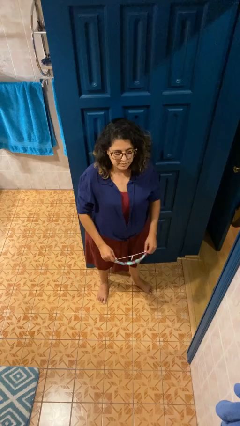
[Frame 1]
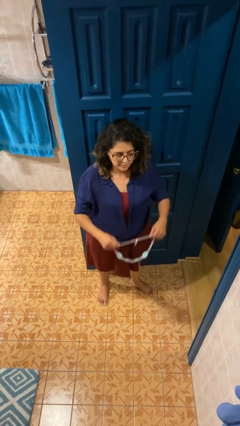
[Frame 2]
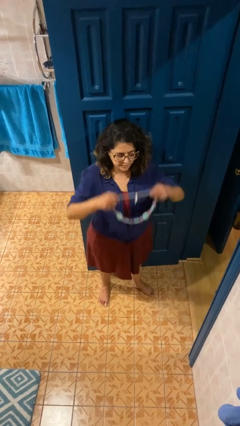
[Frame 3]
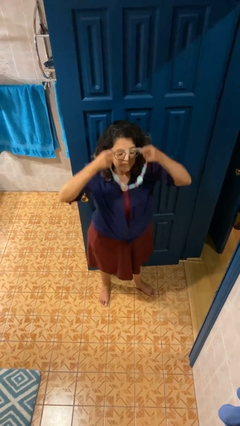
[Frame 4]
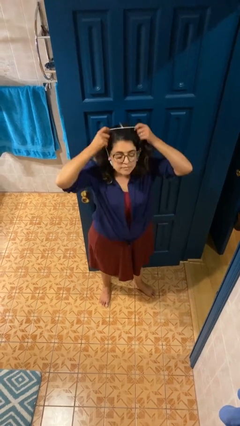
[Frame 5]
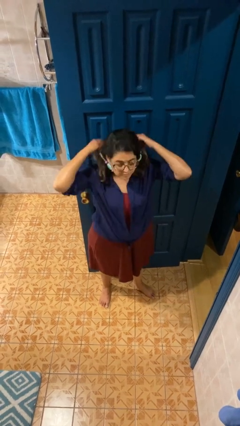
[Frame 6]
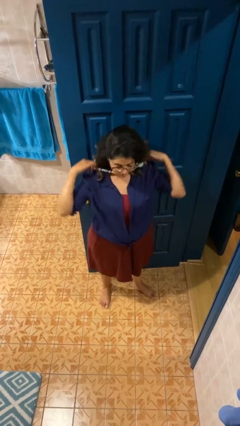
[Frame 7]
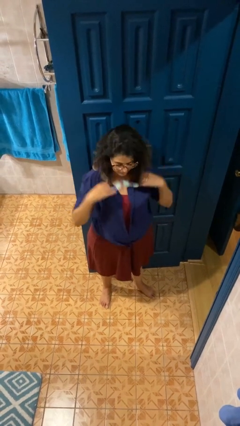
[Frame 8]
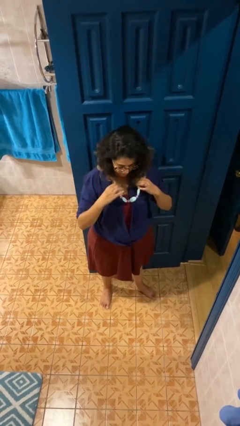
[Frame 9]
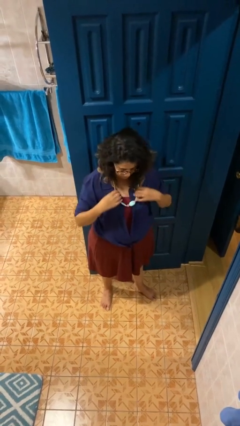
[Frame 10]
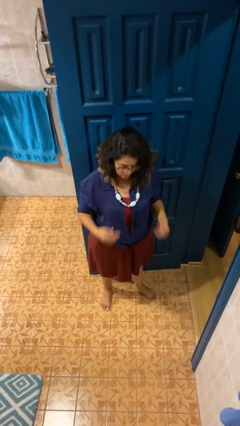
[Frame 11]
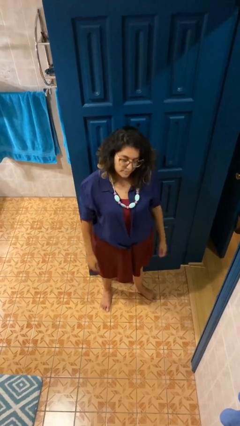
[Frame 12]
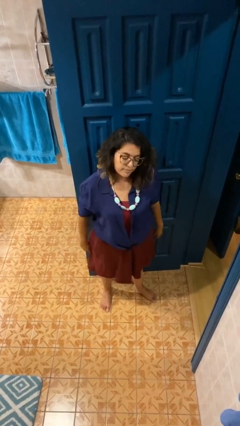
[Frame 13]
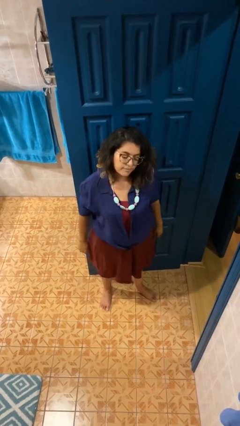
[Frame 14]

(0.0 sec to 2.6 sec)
person puts on necklace

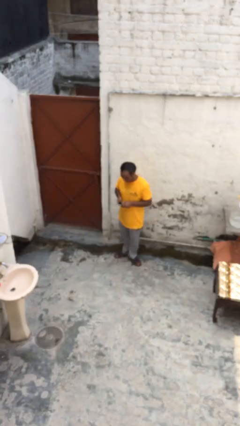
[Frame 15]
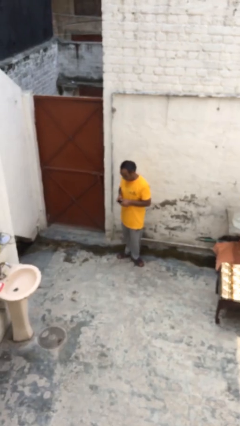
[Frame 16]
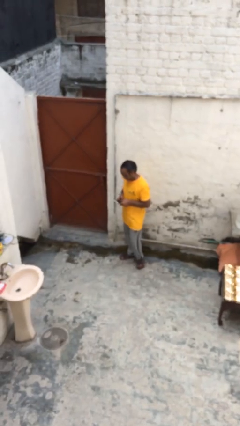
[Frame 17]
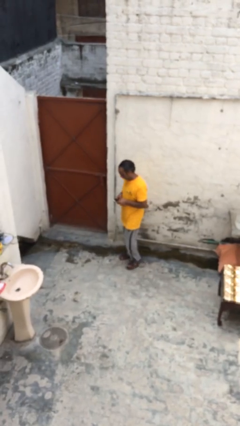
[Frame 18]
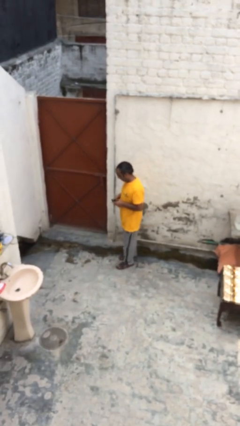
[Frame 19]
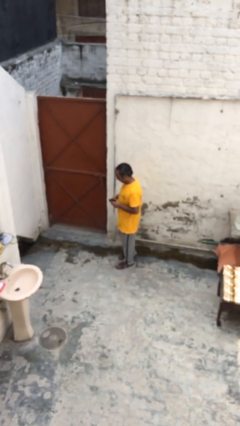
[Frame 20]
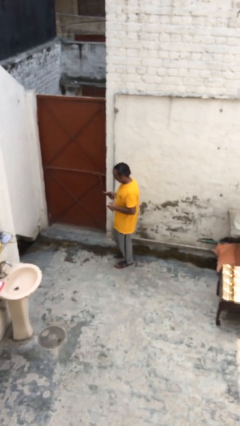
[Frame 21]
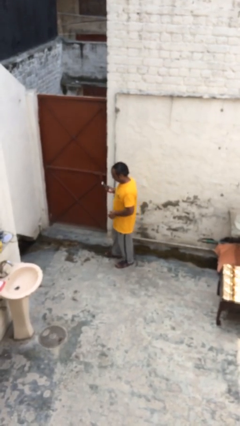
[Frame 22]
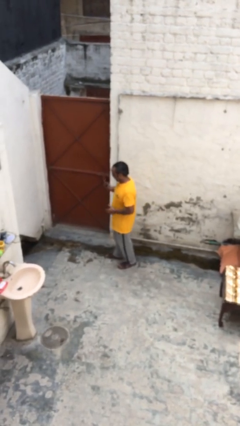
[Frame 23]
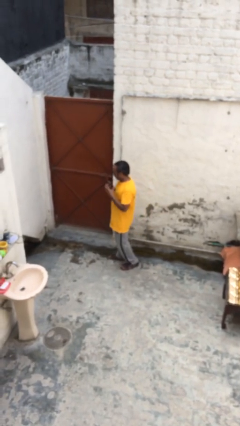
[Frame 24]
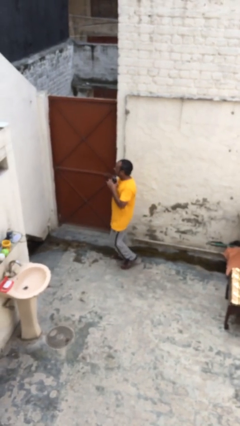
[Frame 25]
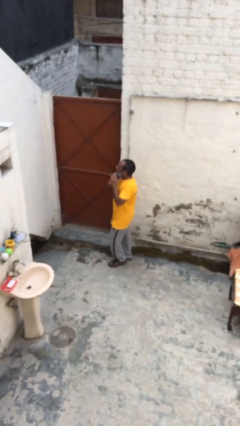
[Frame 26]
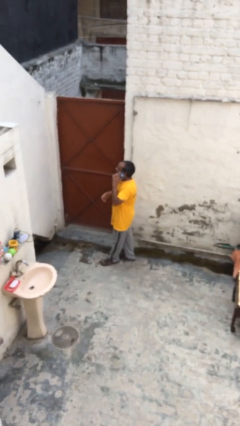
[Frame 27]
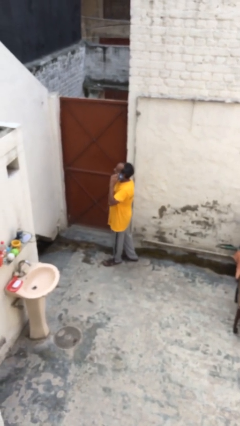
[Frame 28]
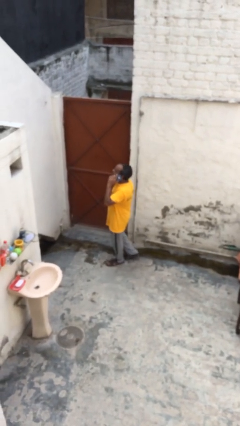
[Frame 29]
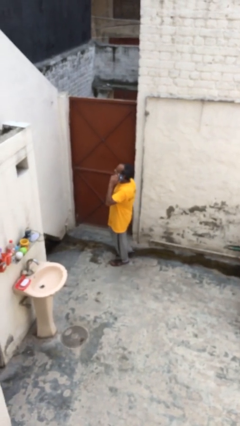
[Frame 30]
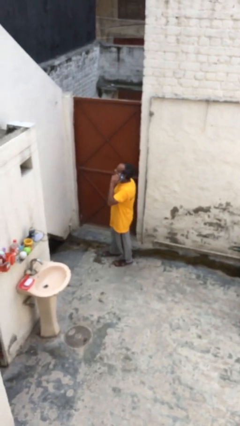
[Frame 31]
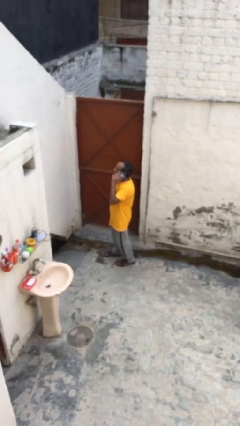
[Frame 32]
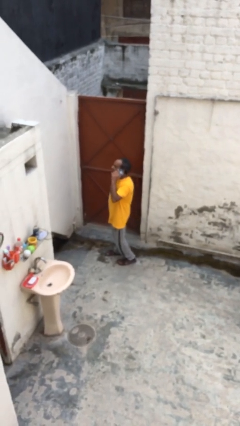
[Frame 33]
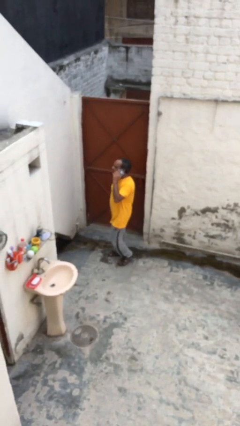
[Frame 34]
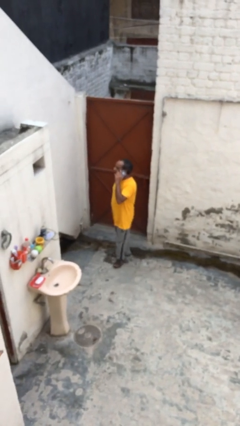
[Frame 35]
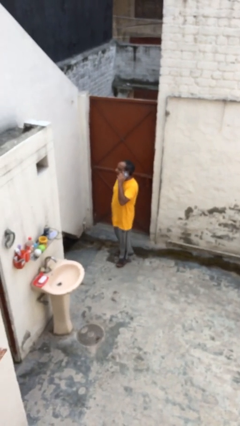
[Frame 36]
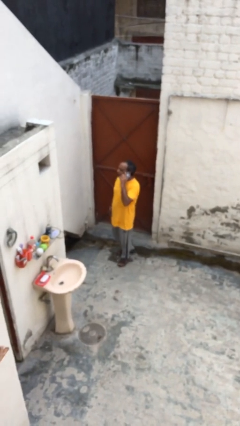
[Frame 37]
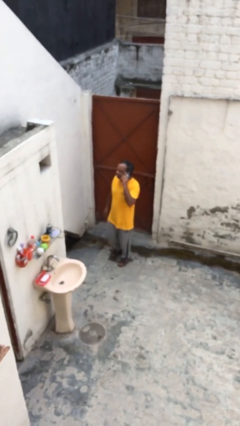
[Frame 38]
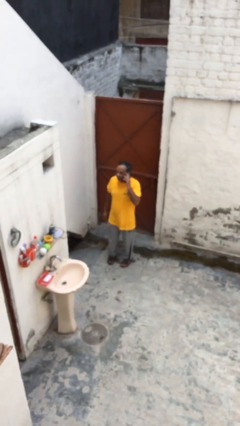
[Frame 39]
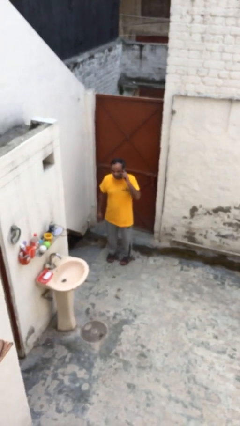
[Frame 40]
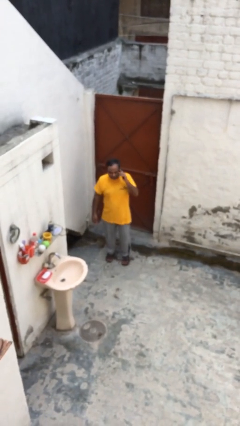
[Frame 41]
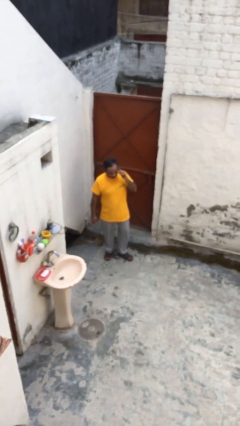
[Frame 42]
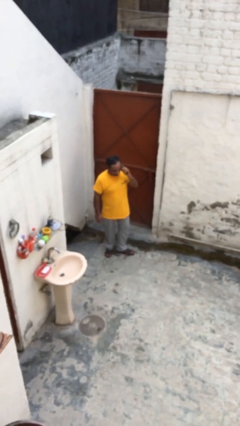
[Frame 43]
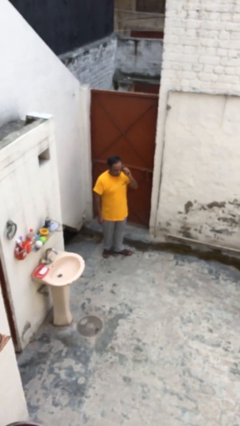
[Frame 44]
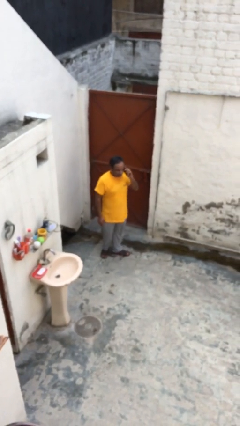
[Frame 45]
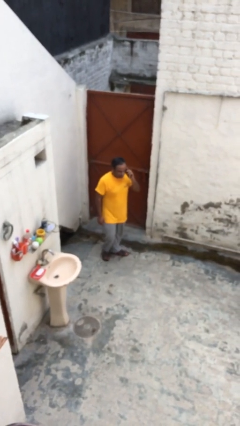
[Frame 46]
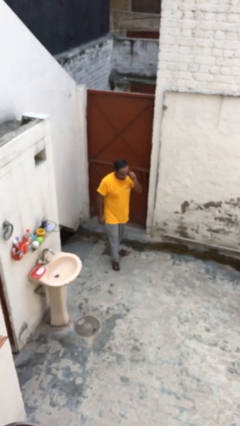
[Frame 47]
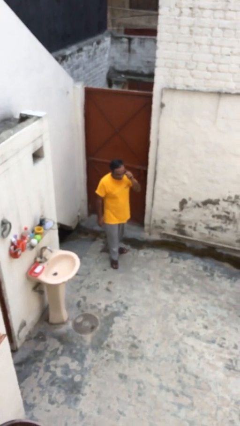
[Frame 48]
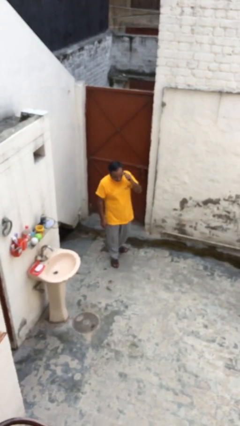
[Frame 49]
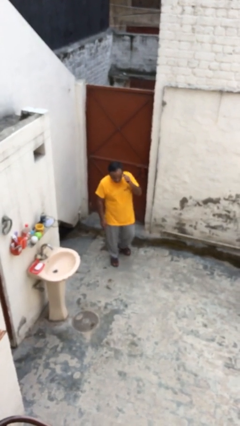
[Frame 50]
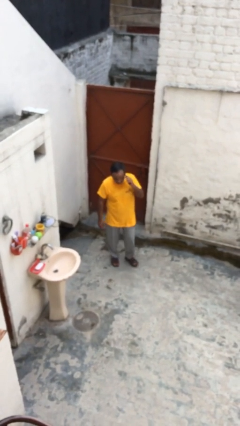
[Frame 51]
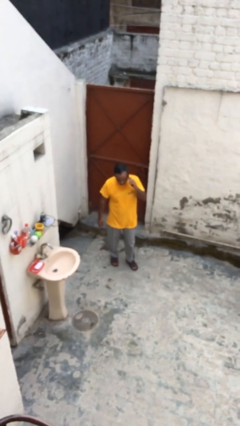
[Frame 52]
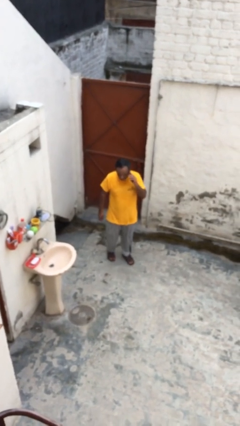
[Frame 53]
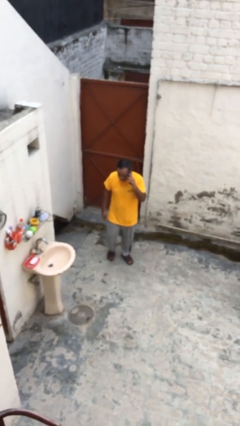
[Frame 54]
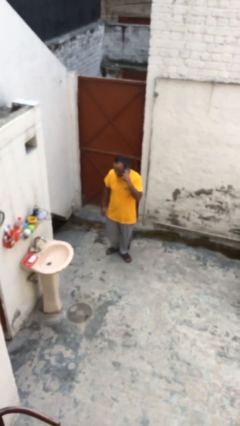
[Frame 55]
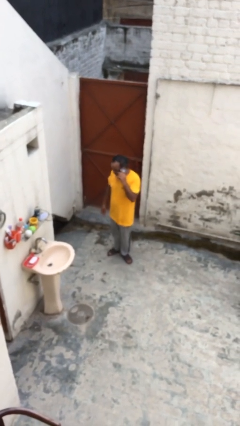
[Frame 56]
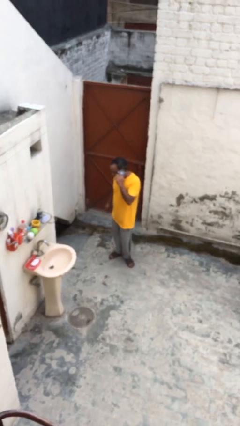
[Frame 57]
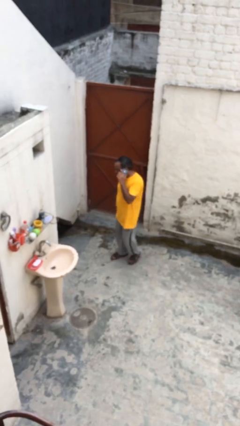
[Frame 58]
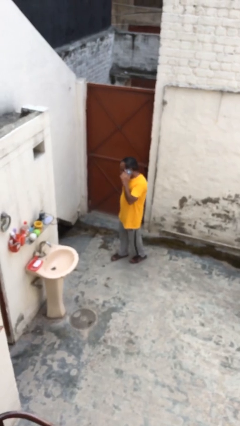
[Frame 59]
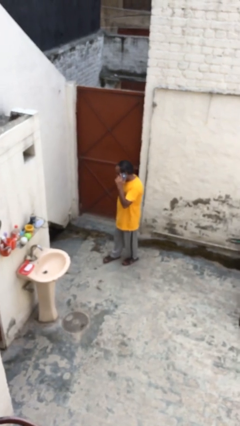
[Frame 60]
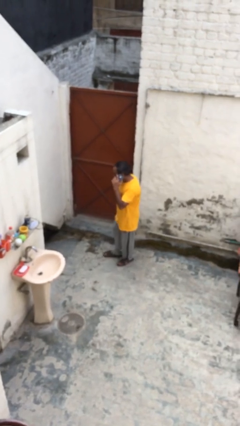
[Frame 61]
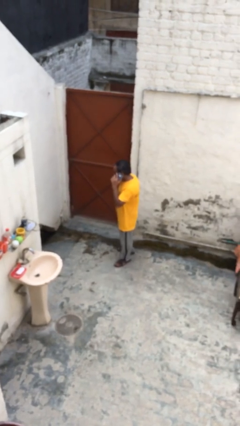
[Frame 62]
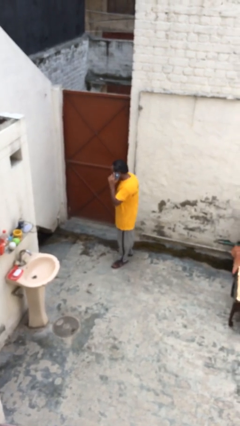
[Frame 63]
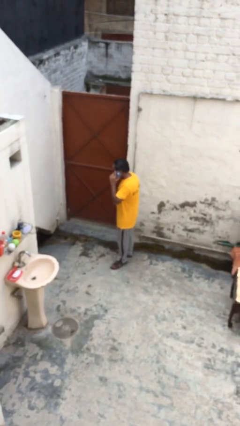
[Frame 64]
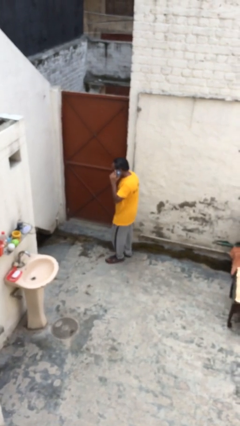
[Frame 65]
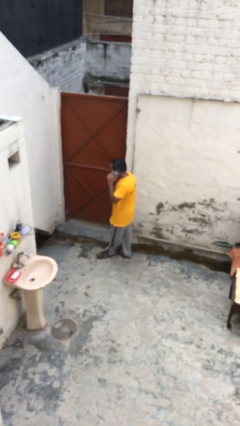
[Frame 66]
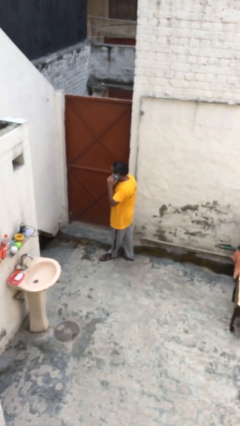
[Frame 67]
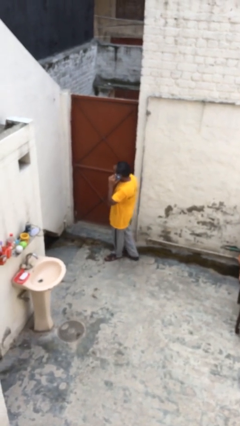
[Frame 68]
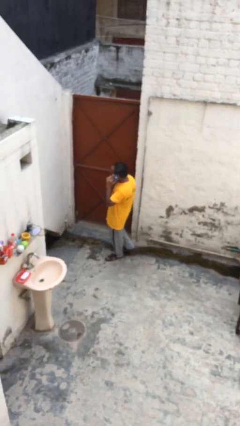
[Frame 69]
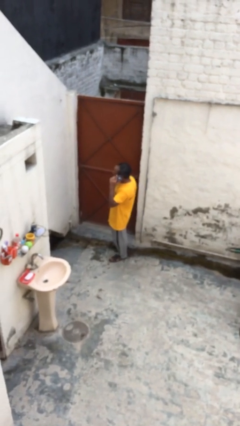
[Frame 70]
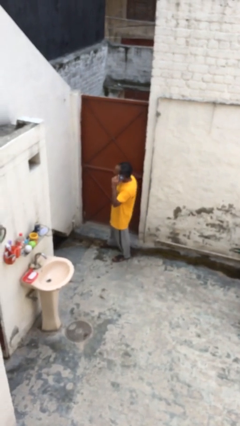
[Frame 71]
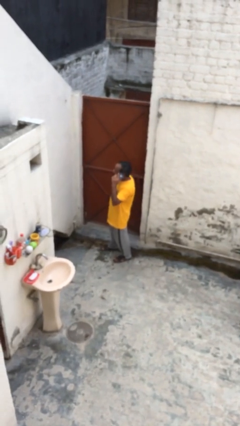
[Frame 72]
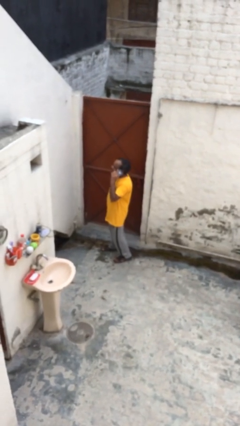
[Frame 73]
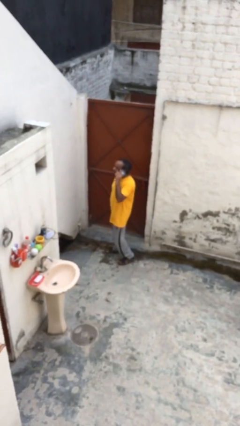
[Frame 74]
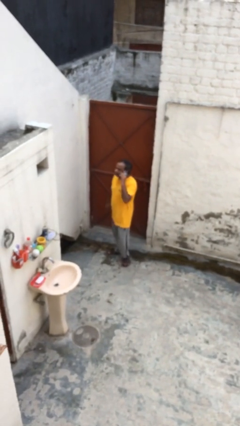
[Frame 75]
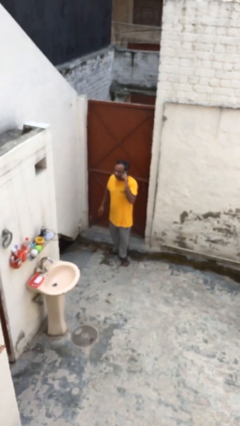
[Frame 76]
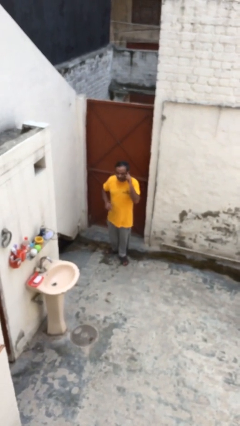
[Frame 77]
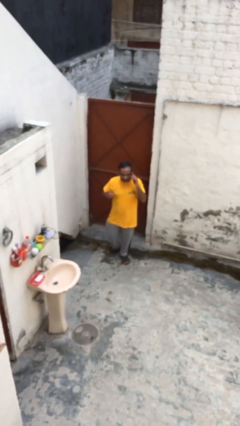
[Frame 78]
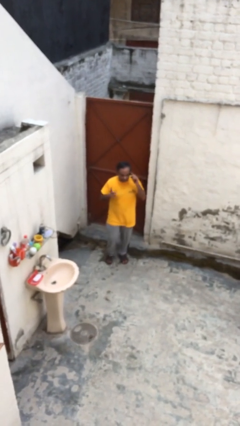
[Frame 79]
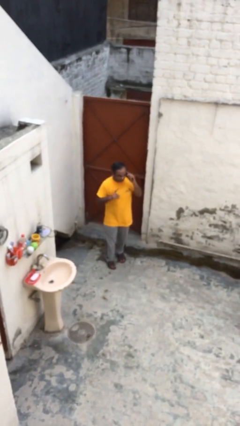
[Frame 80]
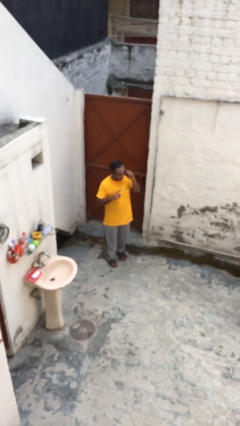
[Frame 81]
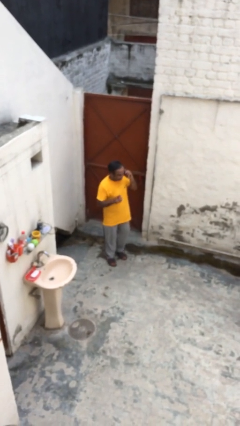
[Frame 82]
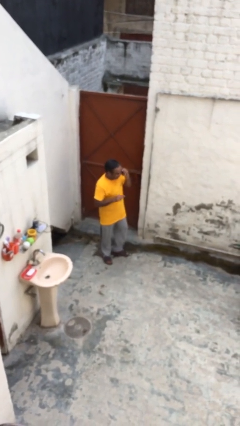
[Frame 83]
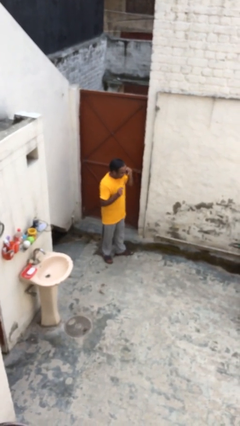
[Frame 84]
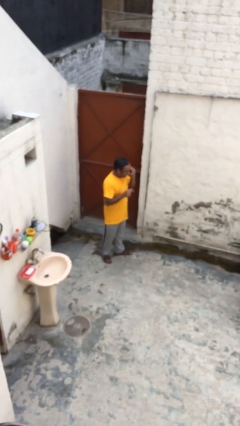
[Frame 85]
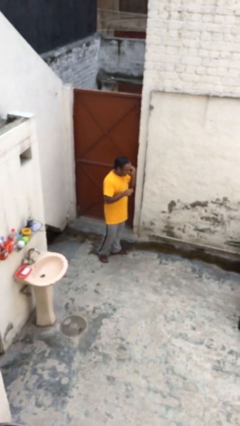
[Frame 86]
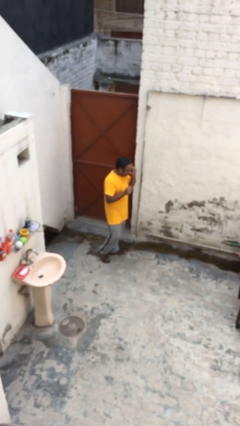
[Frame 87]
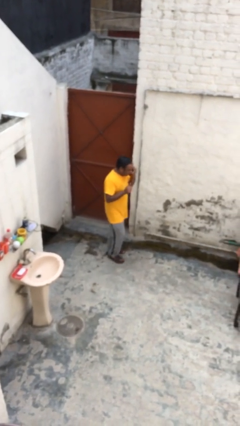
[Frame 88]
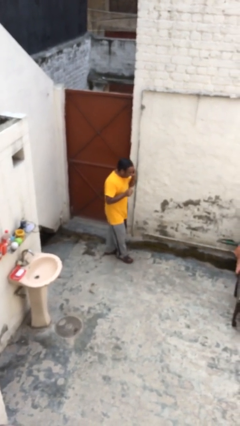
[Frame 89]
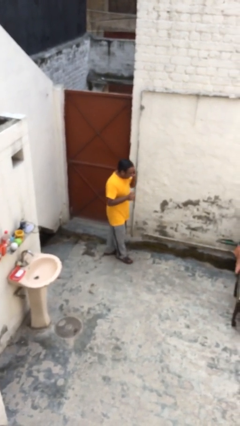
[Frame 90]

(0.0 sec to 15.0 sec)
person talks on phone

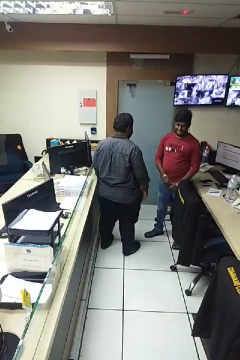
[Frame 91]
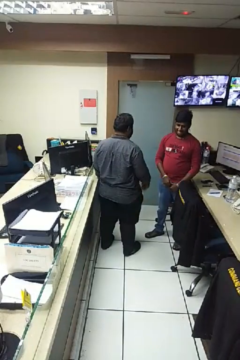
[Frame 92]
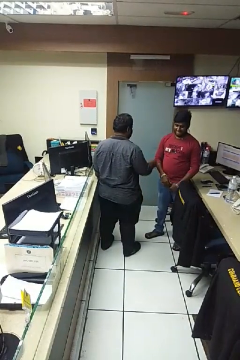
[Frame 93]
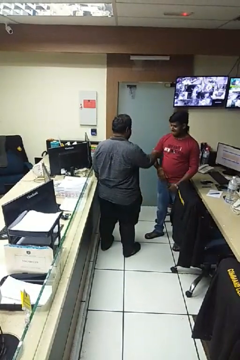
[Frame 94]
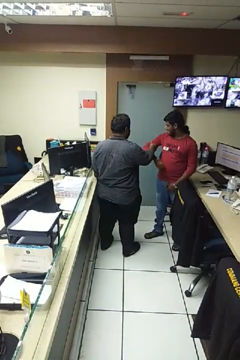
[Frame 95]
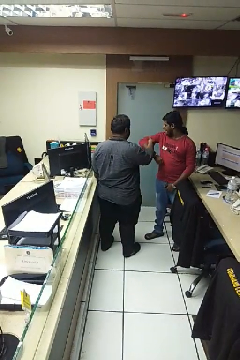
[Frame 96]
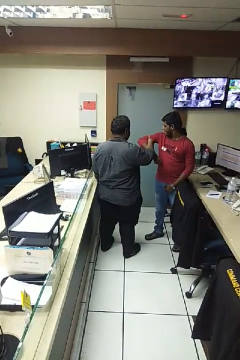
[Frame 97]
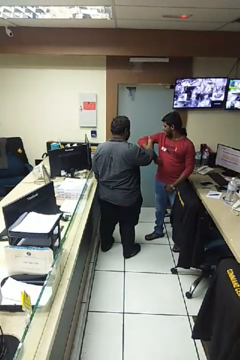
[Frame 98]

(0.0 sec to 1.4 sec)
person grabs person by bicep
